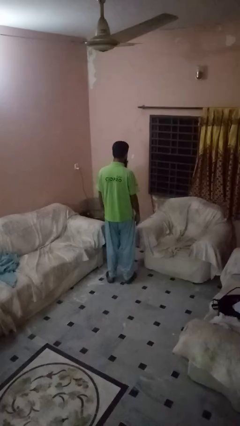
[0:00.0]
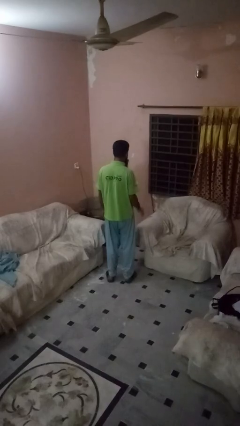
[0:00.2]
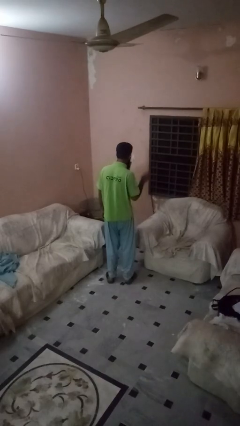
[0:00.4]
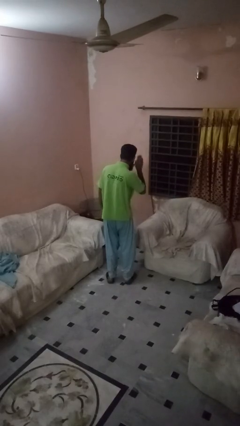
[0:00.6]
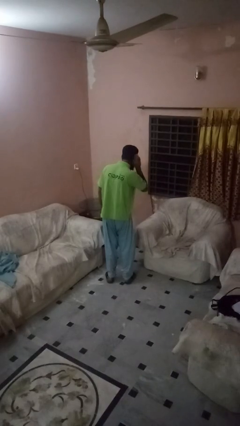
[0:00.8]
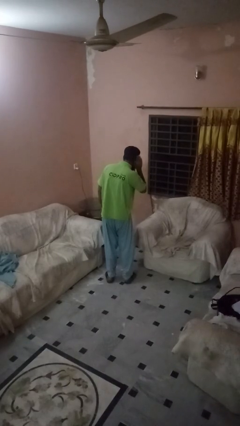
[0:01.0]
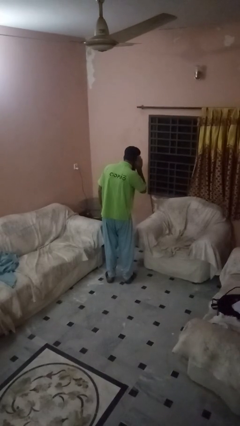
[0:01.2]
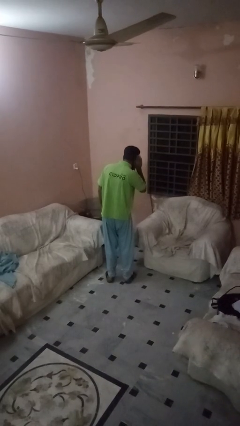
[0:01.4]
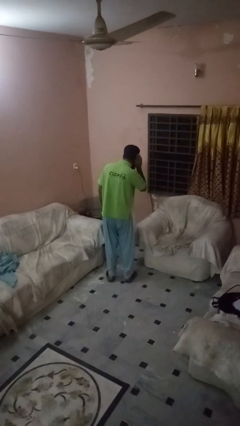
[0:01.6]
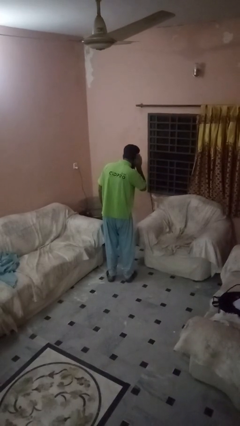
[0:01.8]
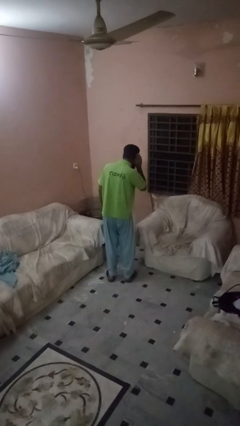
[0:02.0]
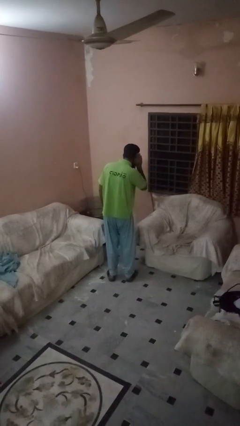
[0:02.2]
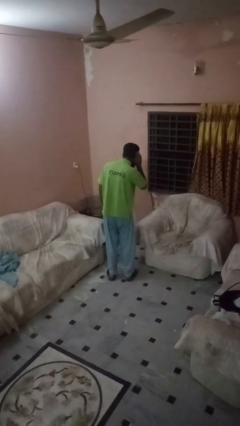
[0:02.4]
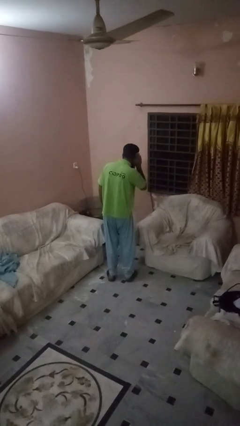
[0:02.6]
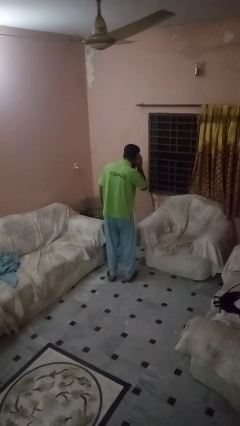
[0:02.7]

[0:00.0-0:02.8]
person gestures listen closely

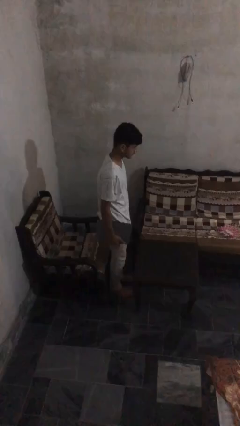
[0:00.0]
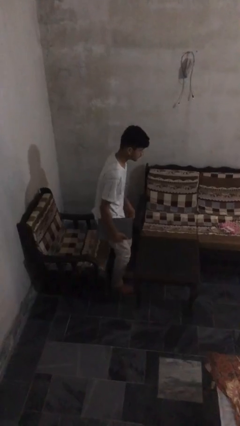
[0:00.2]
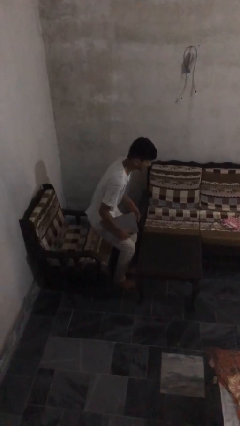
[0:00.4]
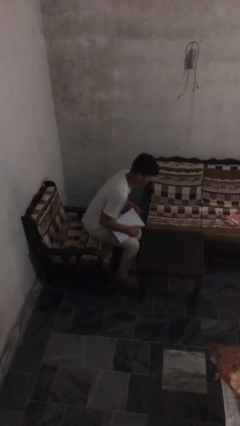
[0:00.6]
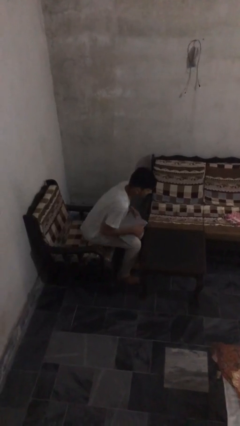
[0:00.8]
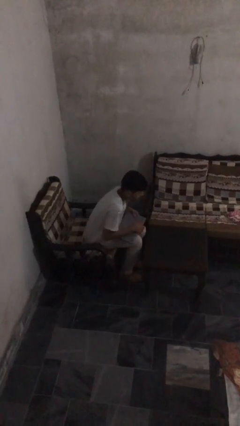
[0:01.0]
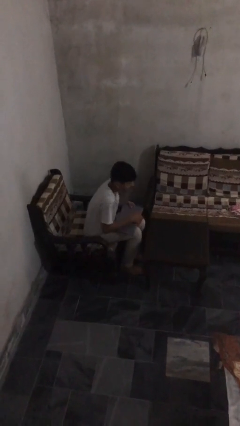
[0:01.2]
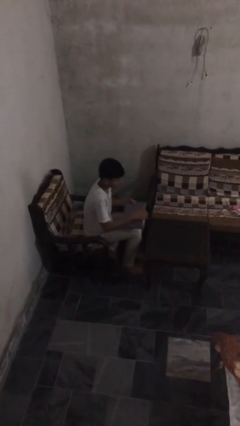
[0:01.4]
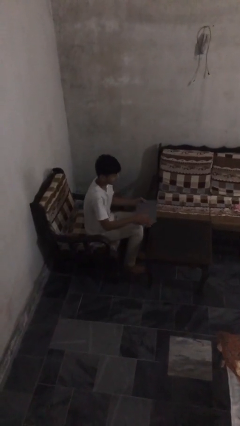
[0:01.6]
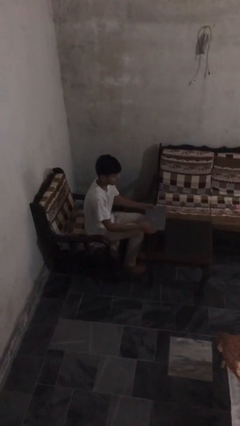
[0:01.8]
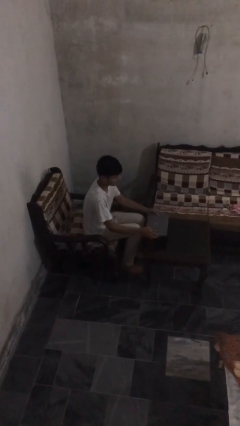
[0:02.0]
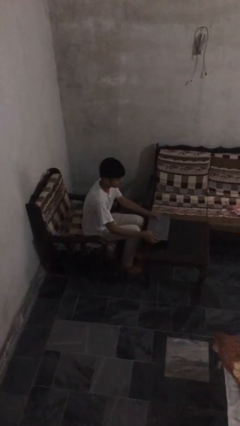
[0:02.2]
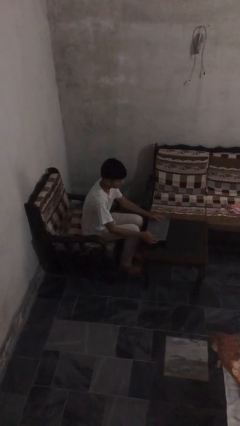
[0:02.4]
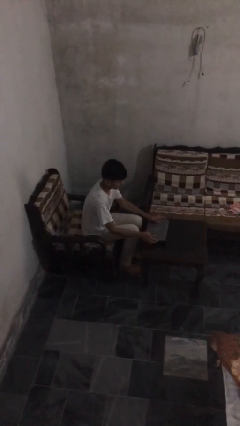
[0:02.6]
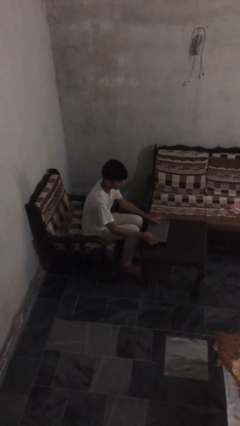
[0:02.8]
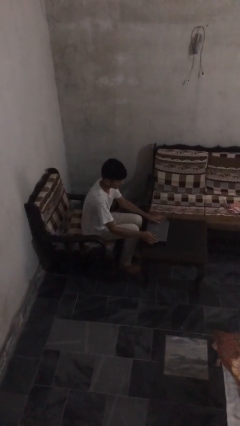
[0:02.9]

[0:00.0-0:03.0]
person sits down

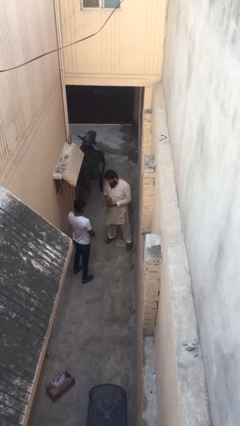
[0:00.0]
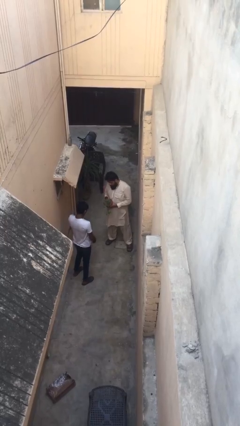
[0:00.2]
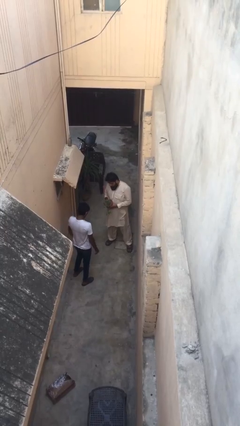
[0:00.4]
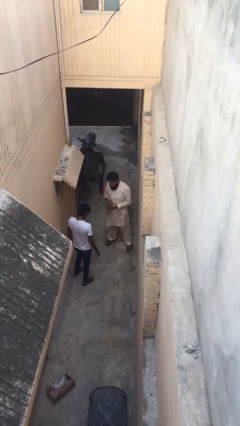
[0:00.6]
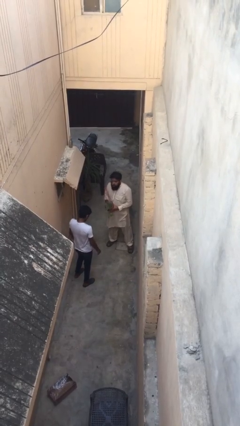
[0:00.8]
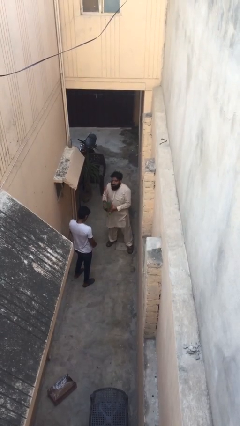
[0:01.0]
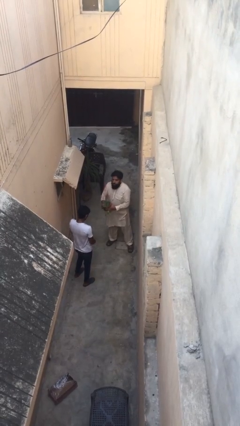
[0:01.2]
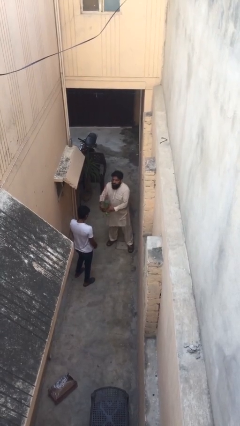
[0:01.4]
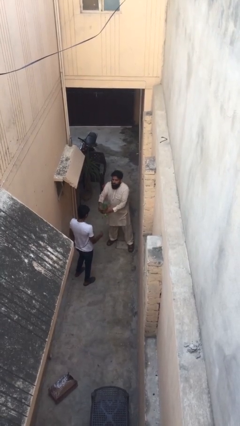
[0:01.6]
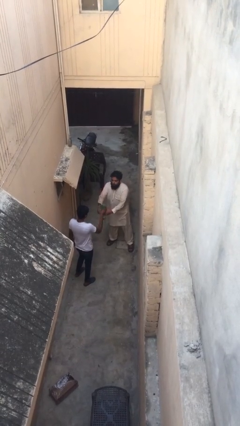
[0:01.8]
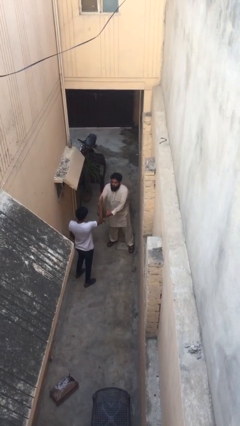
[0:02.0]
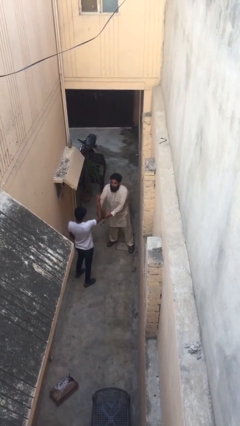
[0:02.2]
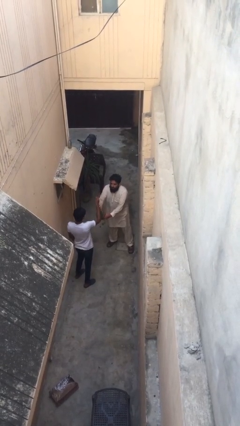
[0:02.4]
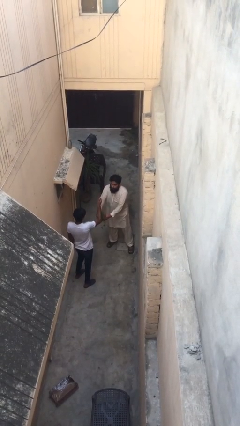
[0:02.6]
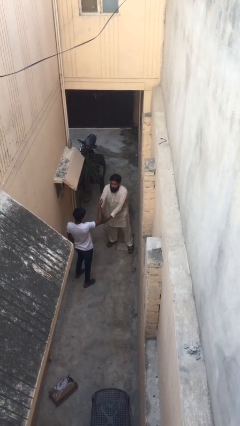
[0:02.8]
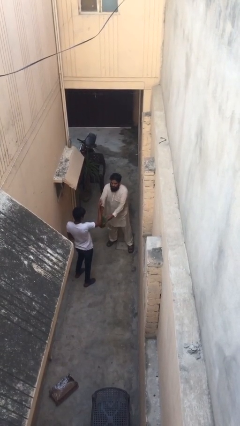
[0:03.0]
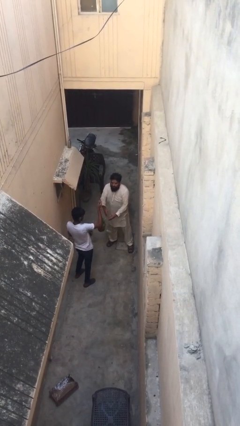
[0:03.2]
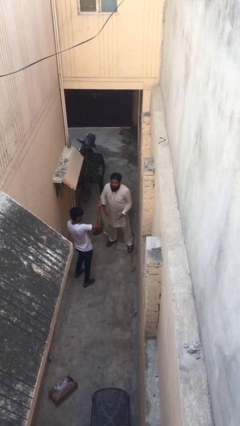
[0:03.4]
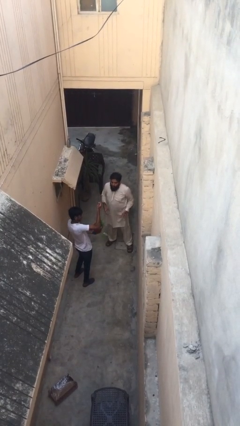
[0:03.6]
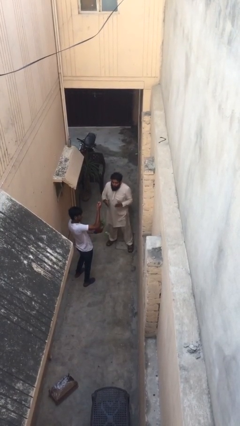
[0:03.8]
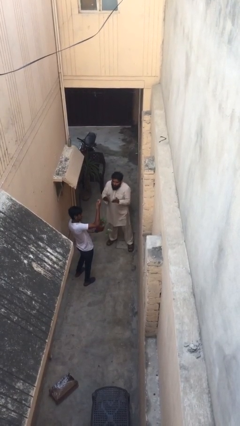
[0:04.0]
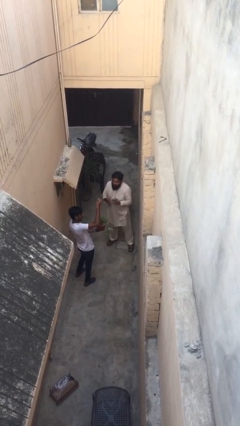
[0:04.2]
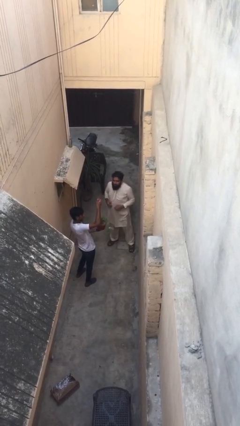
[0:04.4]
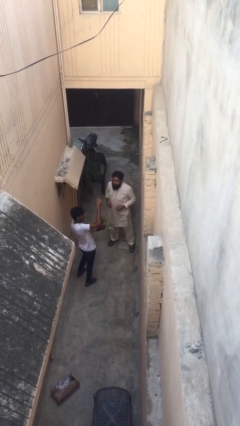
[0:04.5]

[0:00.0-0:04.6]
person transfers object to person

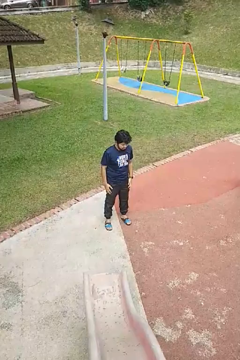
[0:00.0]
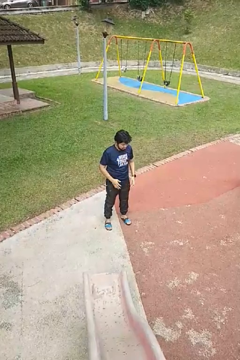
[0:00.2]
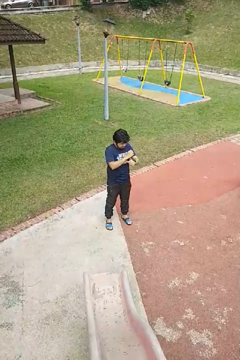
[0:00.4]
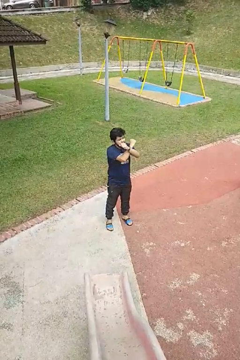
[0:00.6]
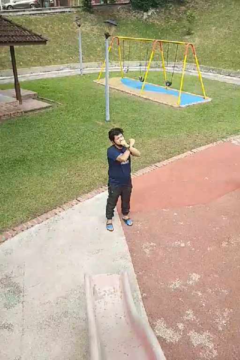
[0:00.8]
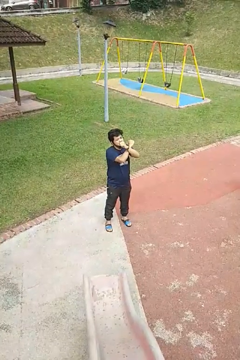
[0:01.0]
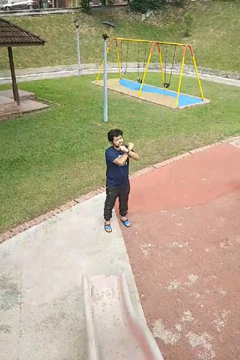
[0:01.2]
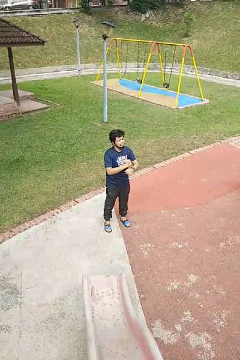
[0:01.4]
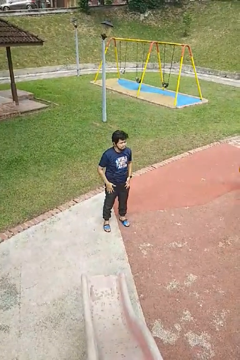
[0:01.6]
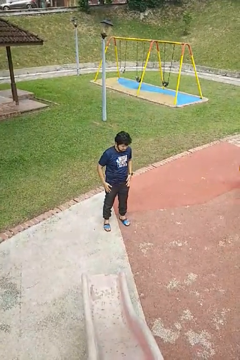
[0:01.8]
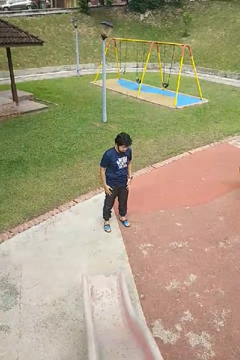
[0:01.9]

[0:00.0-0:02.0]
person gestures arms x

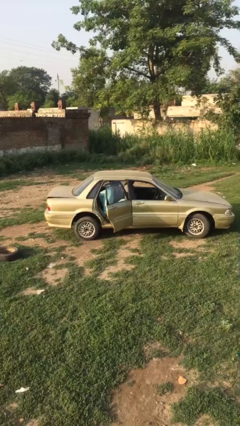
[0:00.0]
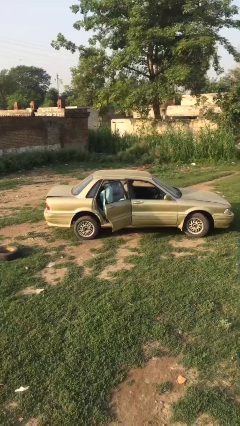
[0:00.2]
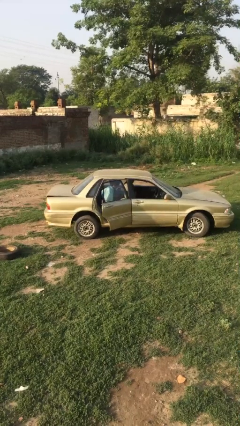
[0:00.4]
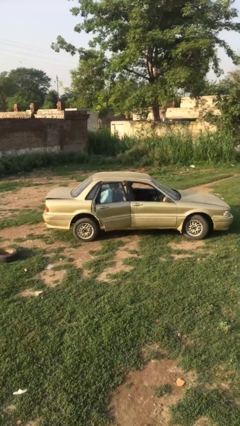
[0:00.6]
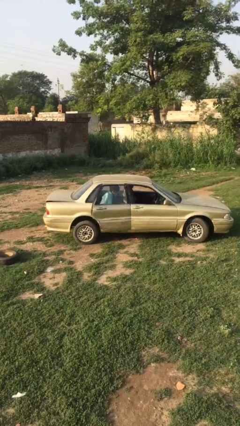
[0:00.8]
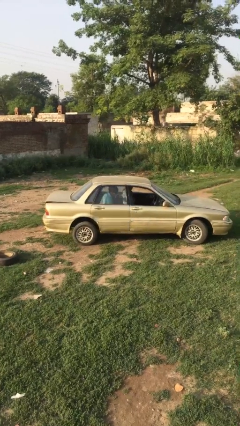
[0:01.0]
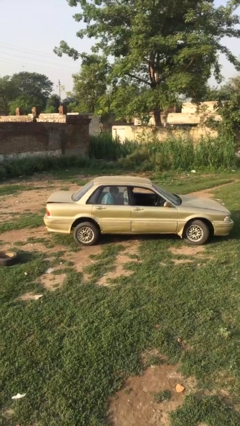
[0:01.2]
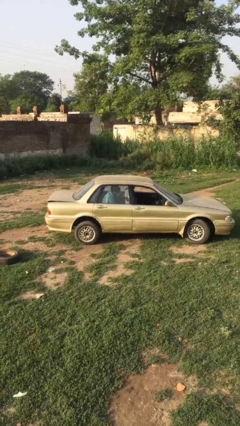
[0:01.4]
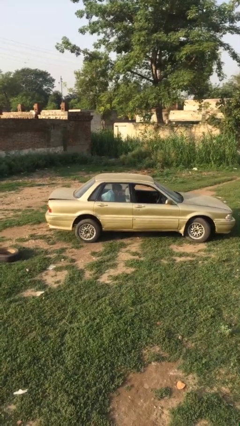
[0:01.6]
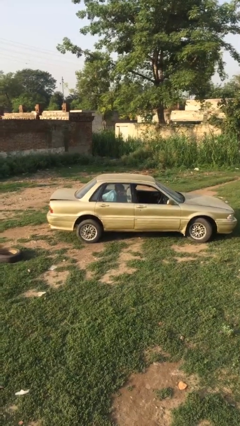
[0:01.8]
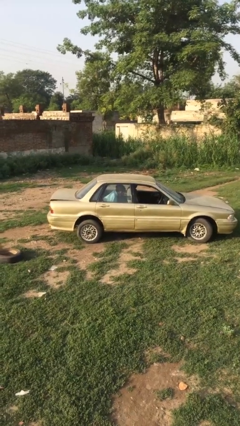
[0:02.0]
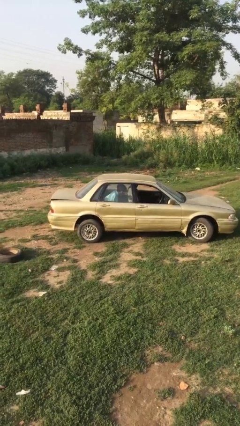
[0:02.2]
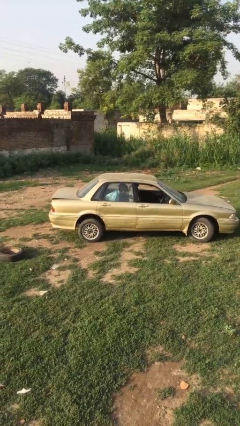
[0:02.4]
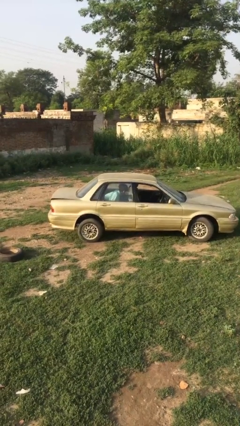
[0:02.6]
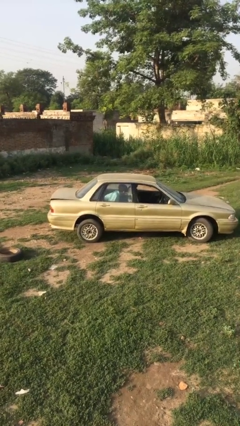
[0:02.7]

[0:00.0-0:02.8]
person closes car door

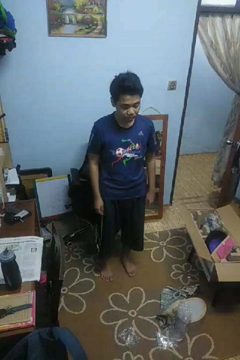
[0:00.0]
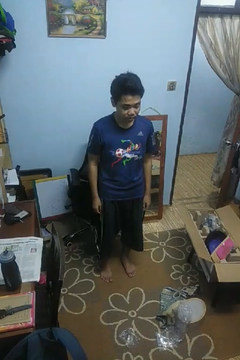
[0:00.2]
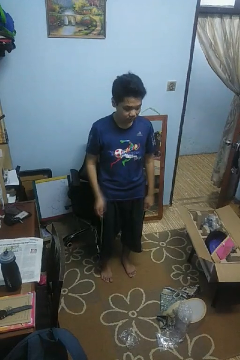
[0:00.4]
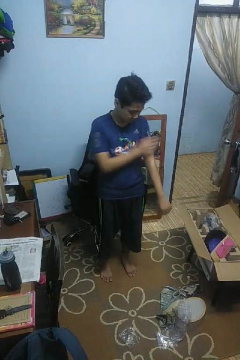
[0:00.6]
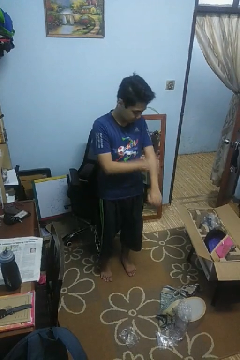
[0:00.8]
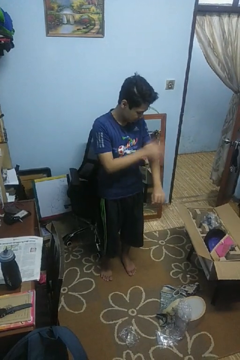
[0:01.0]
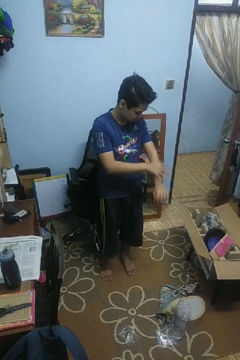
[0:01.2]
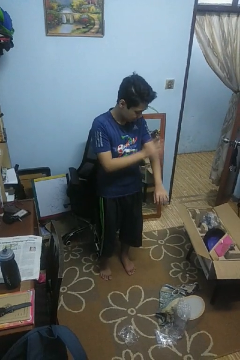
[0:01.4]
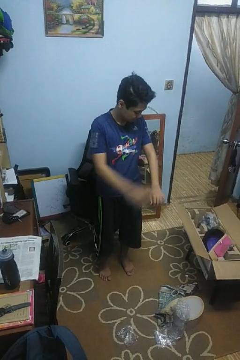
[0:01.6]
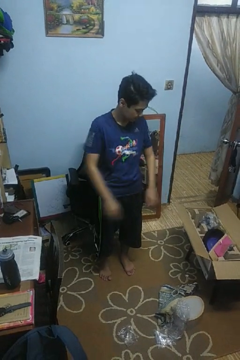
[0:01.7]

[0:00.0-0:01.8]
person swats bug

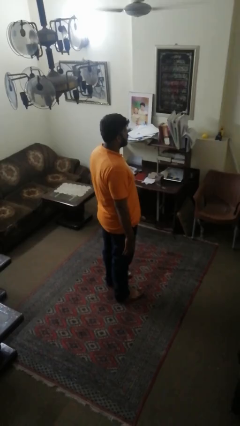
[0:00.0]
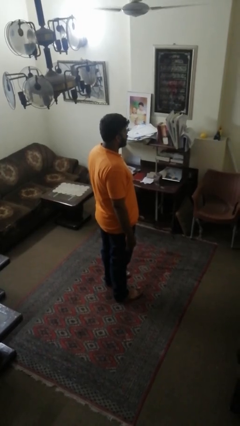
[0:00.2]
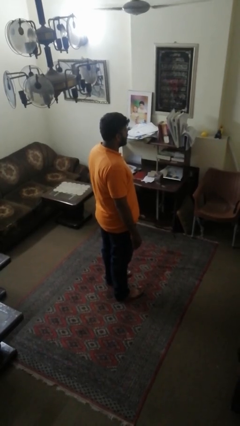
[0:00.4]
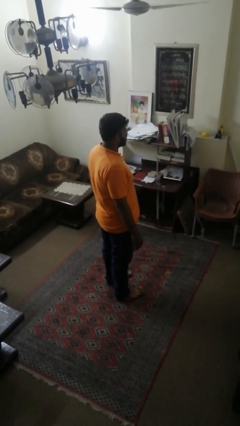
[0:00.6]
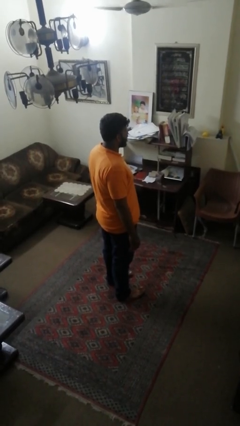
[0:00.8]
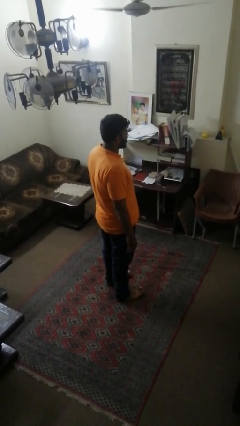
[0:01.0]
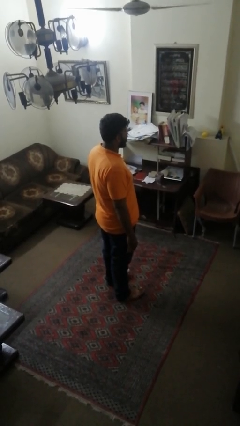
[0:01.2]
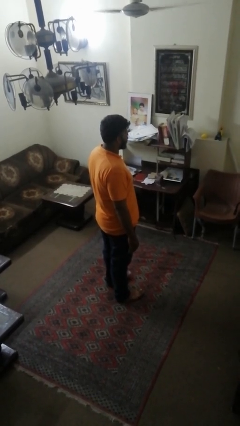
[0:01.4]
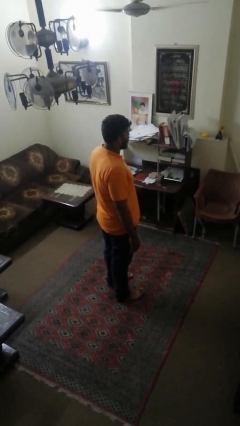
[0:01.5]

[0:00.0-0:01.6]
person puts hands in back pockets
